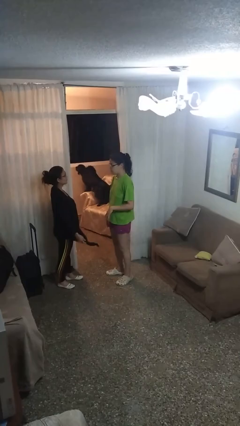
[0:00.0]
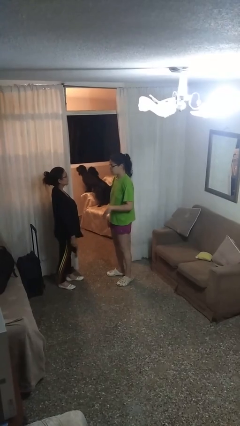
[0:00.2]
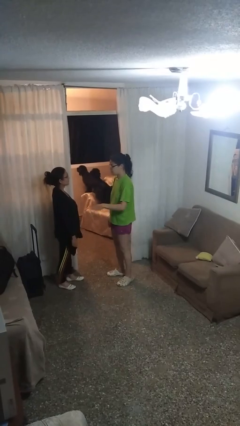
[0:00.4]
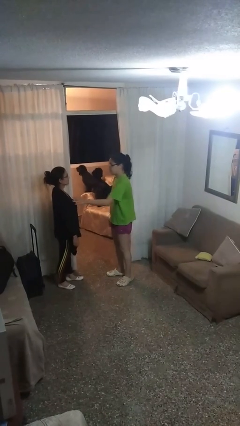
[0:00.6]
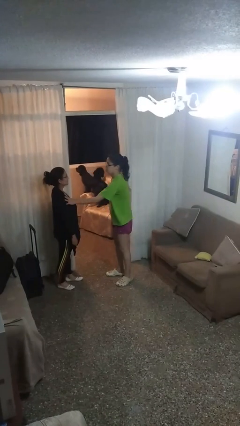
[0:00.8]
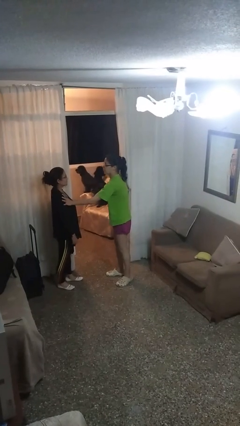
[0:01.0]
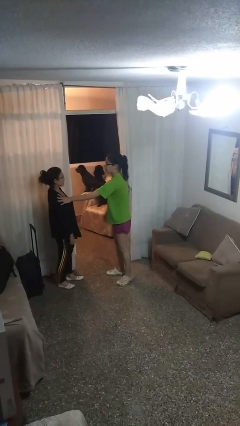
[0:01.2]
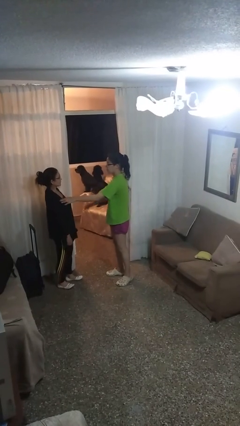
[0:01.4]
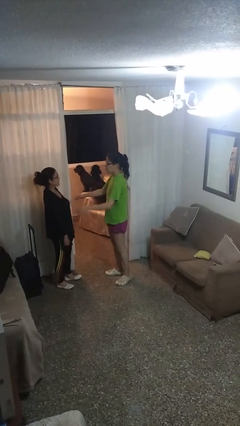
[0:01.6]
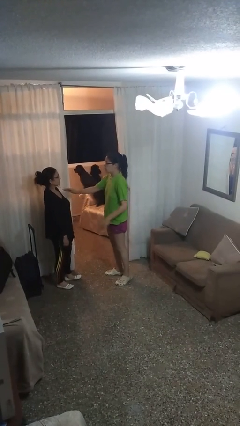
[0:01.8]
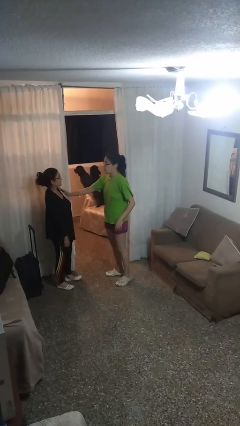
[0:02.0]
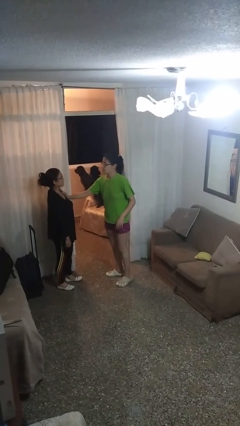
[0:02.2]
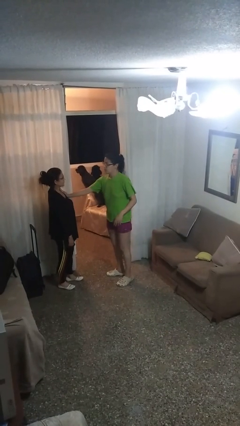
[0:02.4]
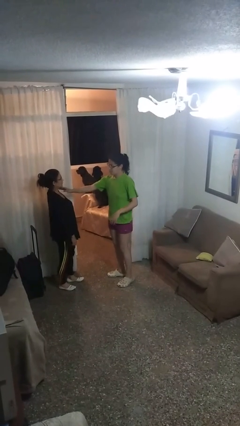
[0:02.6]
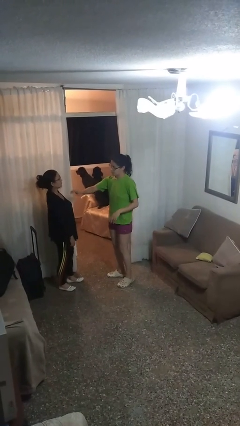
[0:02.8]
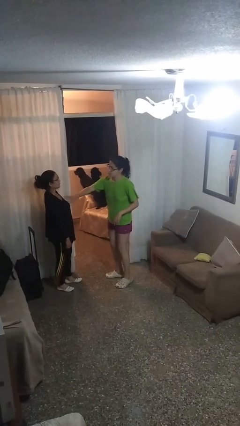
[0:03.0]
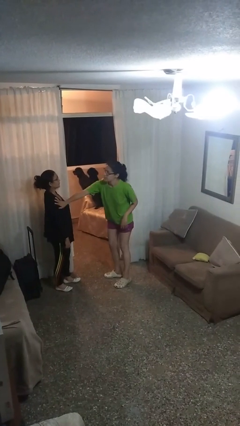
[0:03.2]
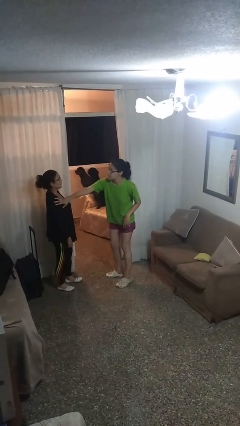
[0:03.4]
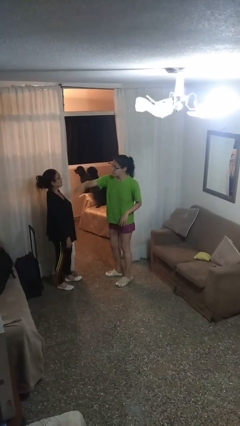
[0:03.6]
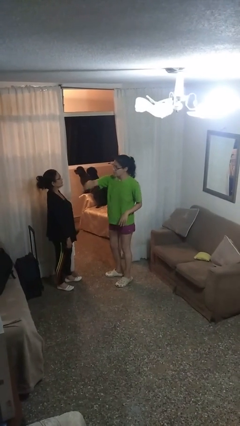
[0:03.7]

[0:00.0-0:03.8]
person shoves person

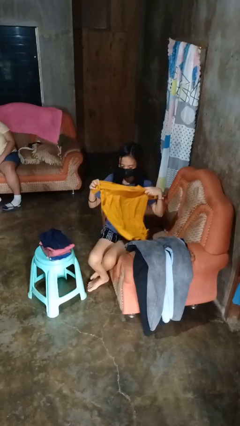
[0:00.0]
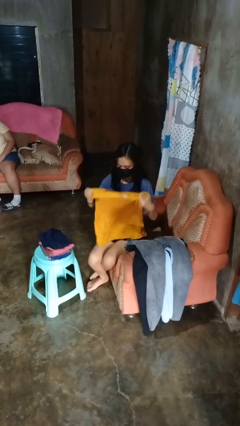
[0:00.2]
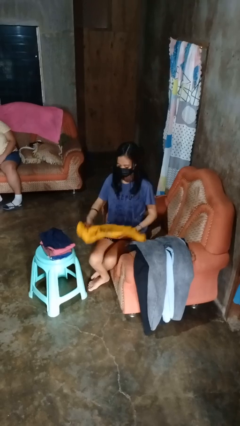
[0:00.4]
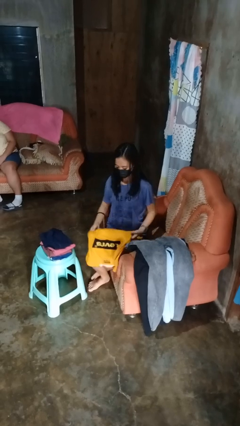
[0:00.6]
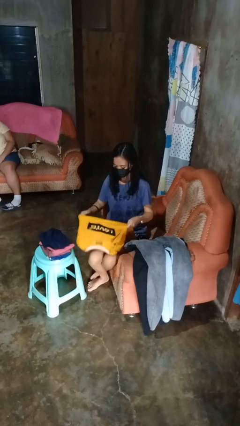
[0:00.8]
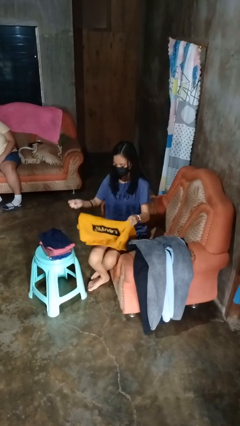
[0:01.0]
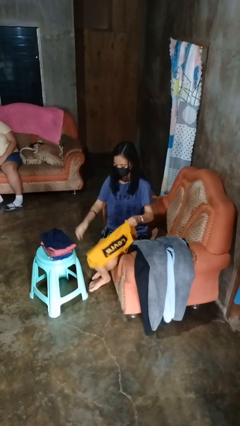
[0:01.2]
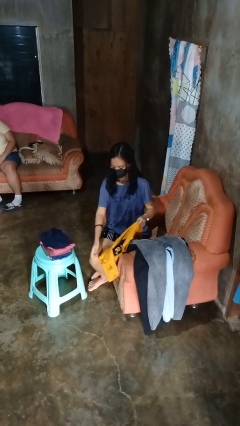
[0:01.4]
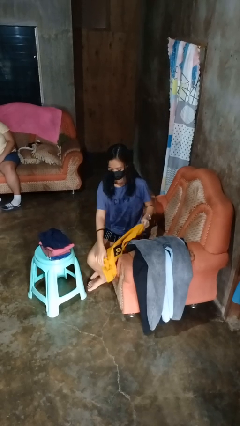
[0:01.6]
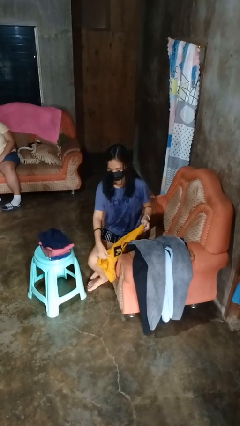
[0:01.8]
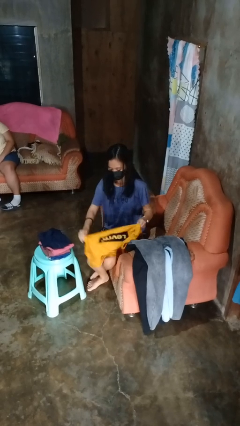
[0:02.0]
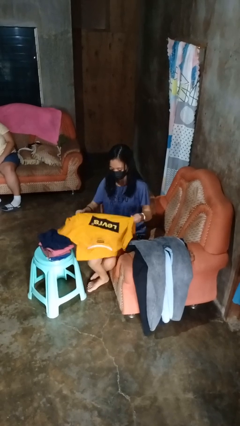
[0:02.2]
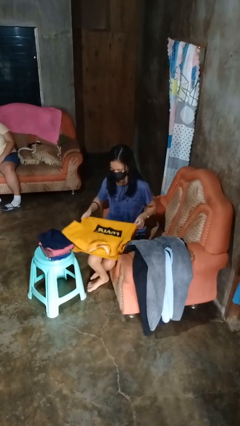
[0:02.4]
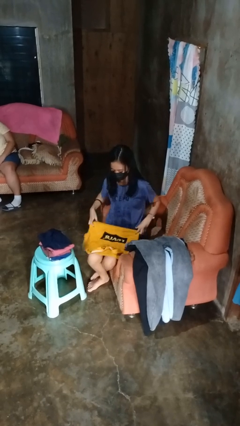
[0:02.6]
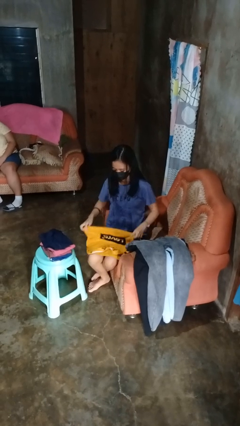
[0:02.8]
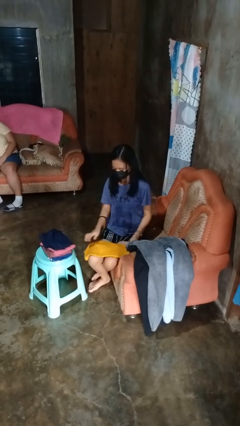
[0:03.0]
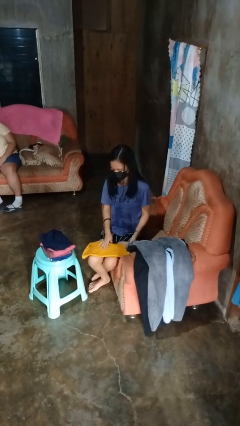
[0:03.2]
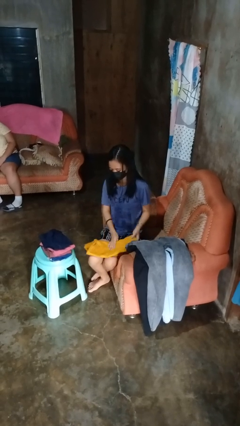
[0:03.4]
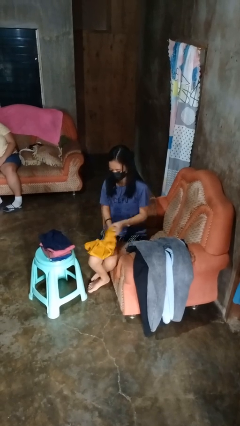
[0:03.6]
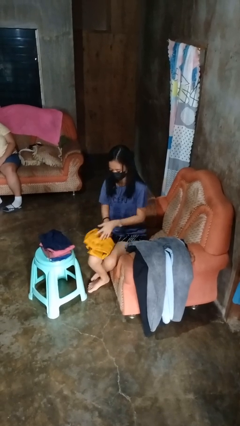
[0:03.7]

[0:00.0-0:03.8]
person folds shirt

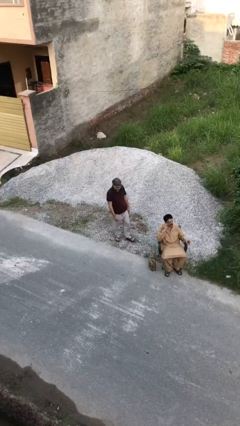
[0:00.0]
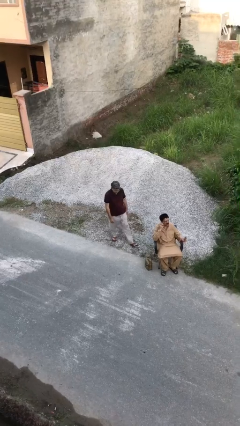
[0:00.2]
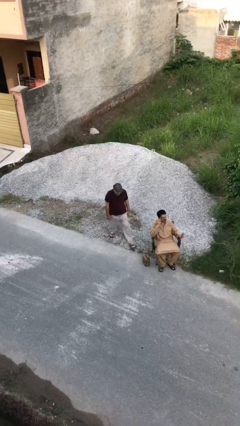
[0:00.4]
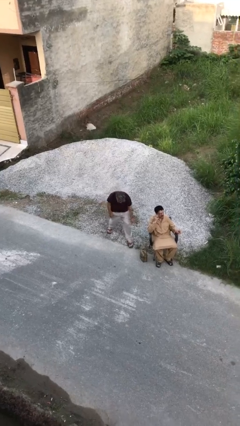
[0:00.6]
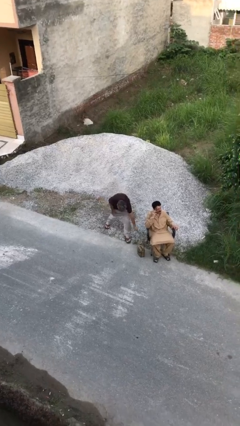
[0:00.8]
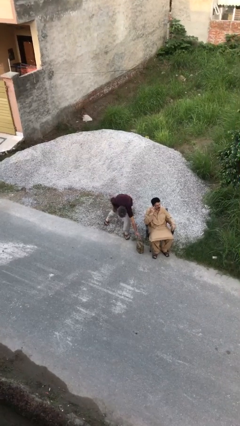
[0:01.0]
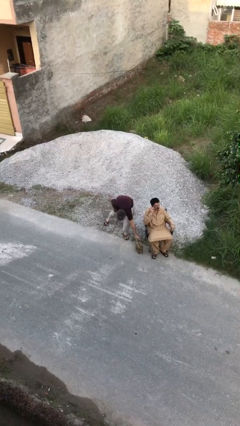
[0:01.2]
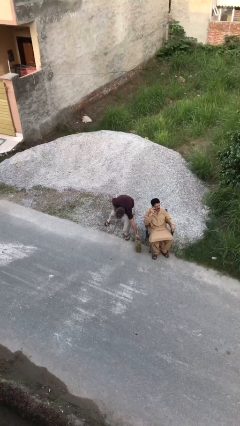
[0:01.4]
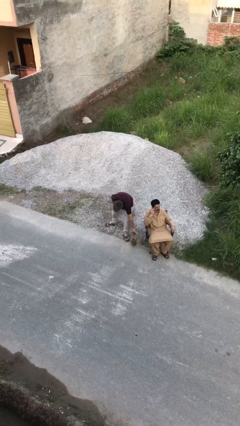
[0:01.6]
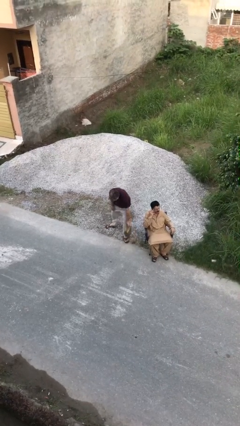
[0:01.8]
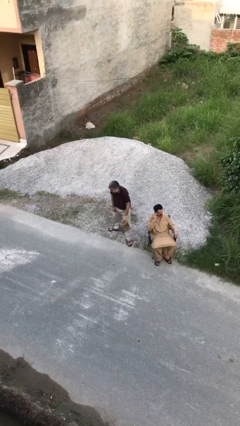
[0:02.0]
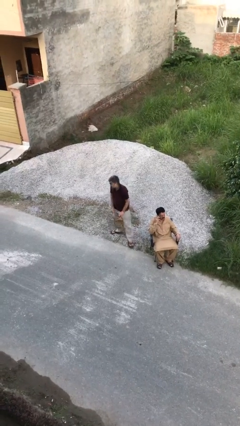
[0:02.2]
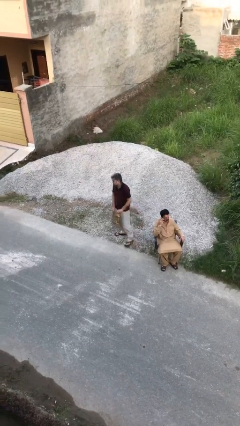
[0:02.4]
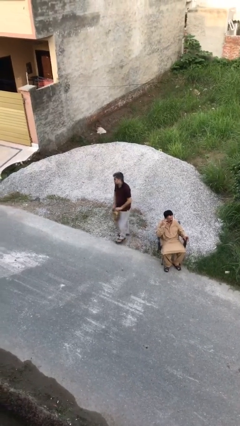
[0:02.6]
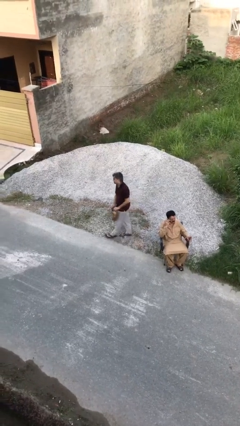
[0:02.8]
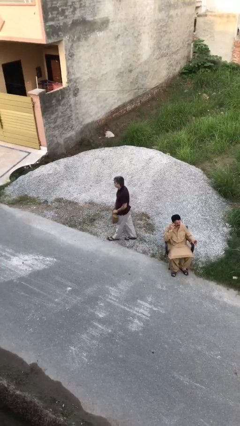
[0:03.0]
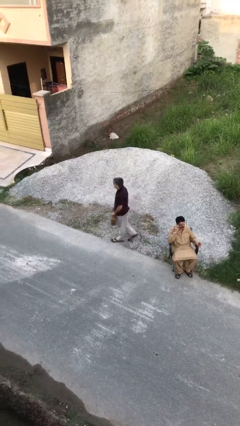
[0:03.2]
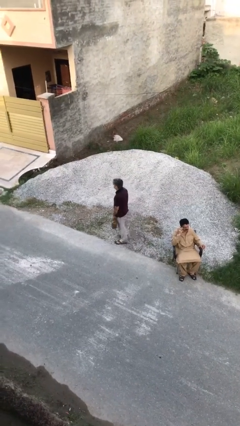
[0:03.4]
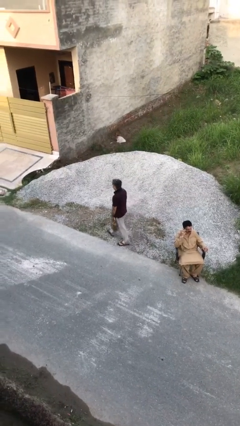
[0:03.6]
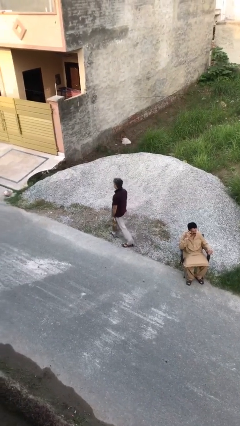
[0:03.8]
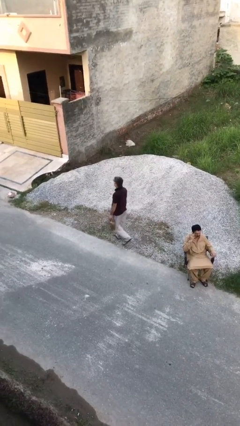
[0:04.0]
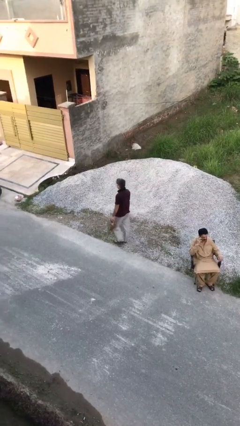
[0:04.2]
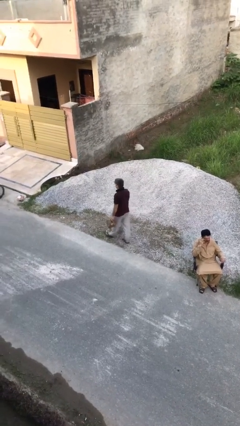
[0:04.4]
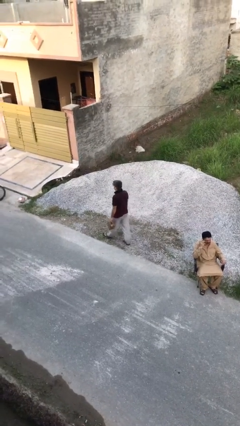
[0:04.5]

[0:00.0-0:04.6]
person steals object from person

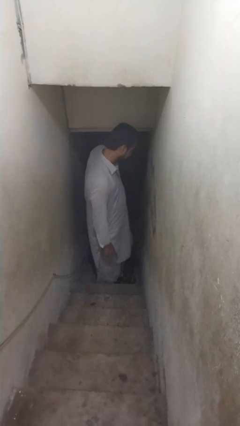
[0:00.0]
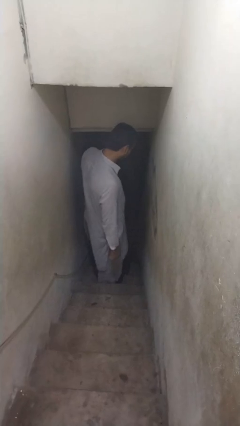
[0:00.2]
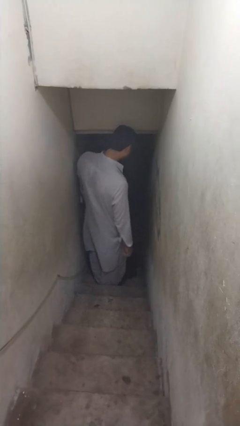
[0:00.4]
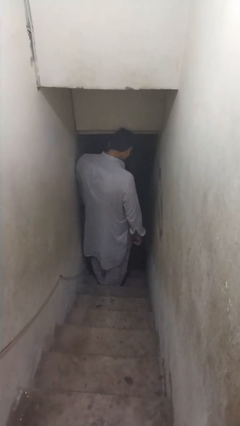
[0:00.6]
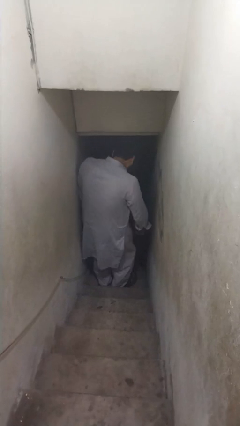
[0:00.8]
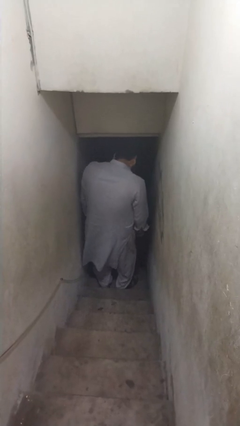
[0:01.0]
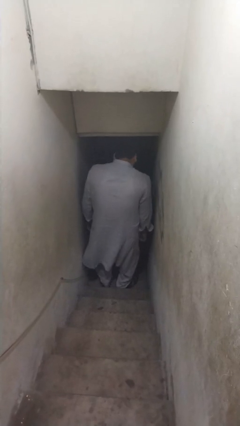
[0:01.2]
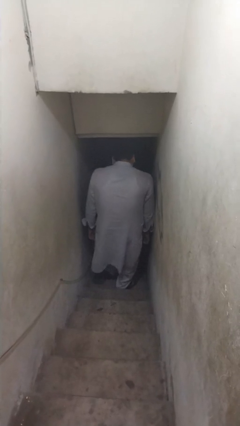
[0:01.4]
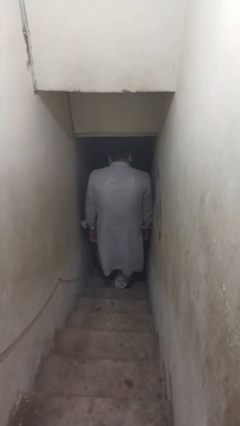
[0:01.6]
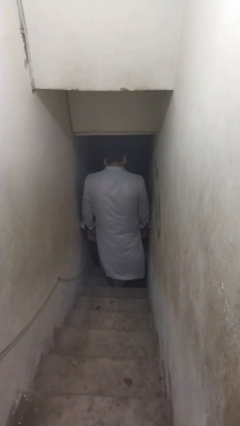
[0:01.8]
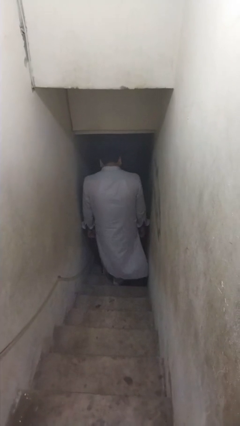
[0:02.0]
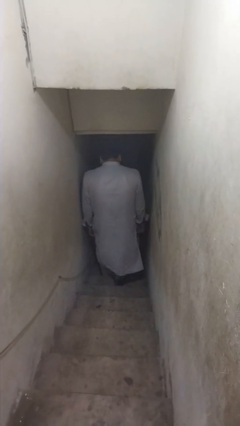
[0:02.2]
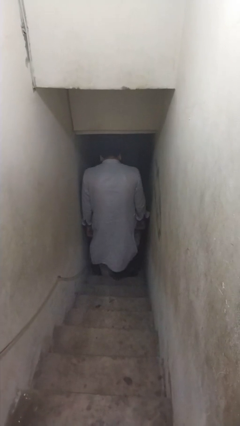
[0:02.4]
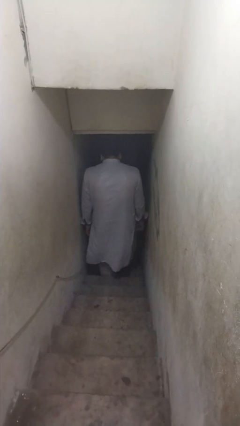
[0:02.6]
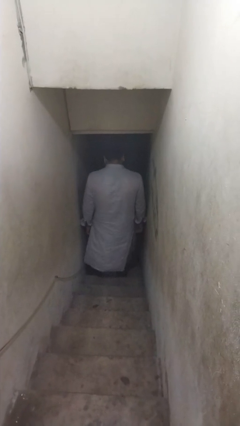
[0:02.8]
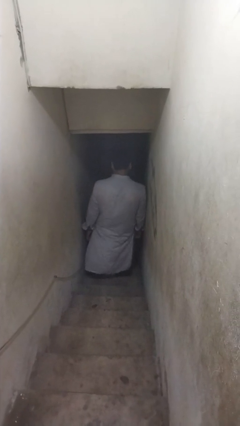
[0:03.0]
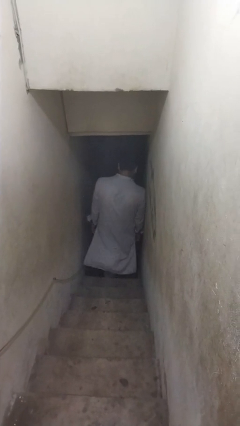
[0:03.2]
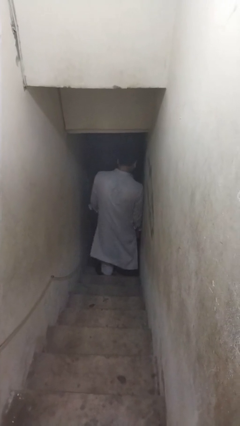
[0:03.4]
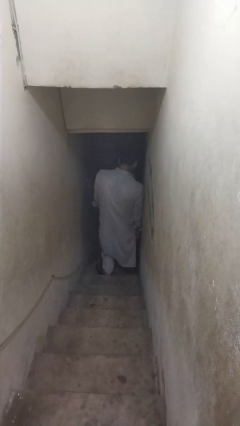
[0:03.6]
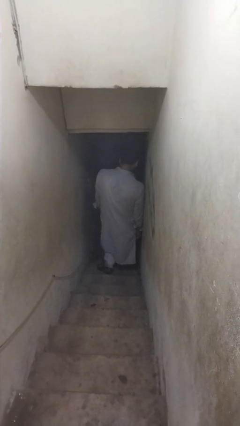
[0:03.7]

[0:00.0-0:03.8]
person climbs down stairs

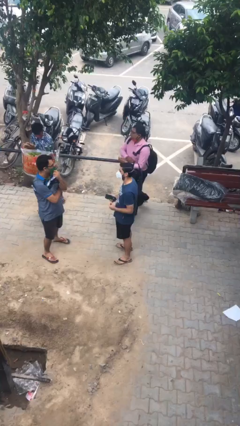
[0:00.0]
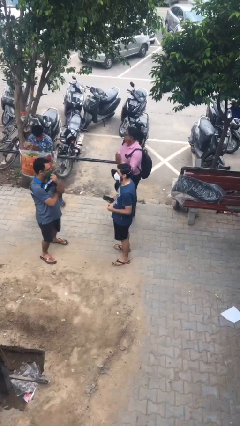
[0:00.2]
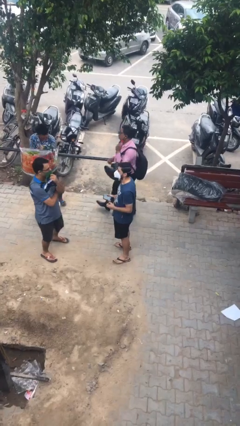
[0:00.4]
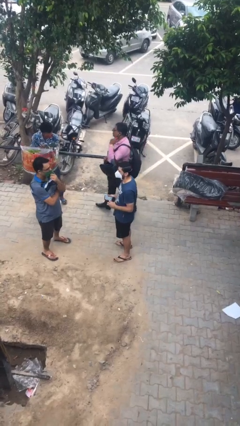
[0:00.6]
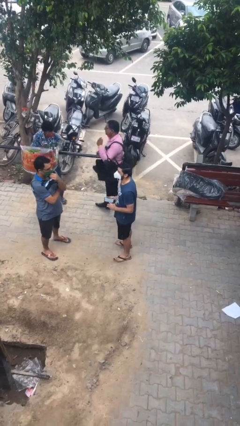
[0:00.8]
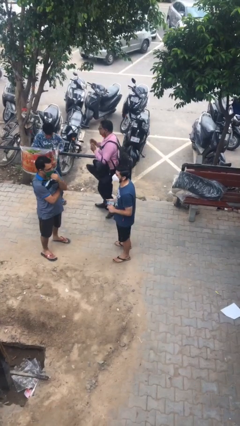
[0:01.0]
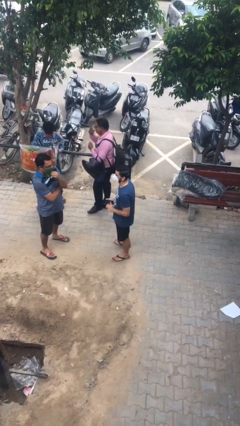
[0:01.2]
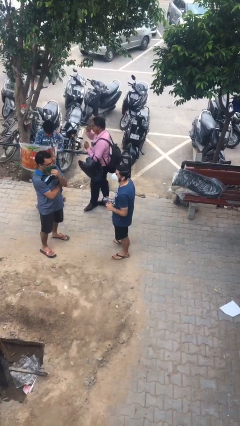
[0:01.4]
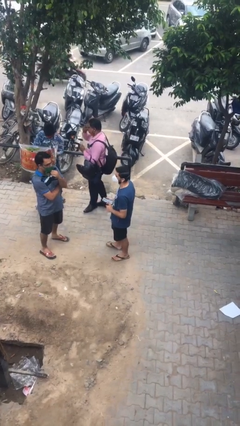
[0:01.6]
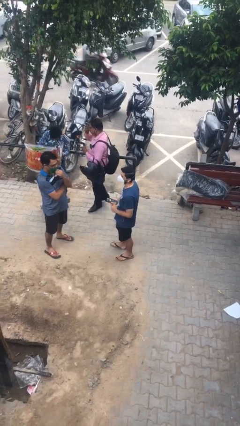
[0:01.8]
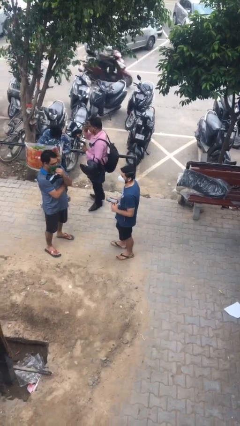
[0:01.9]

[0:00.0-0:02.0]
person talks to person
